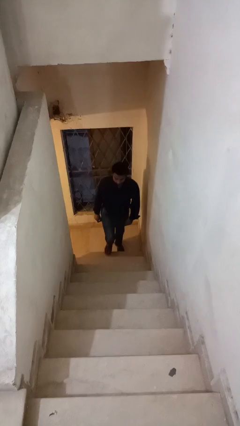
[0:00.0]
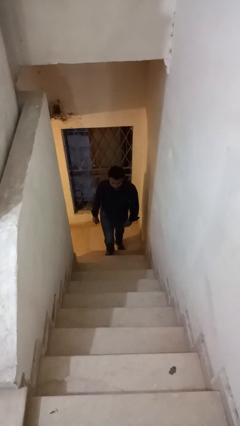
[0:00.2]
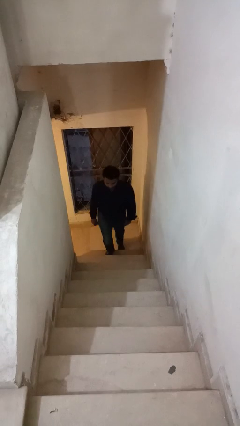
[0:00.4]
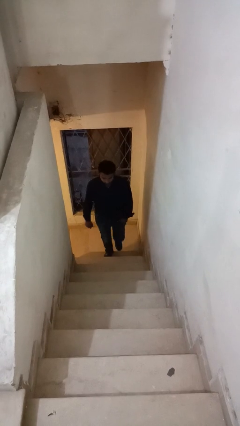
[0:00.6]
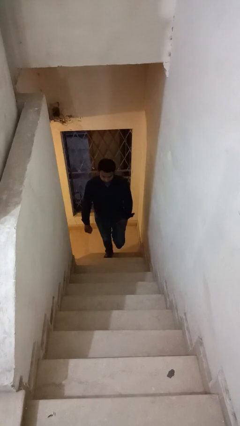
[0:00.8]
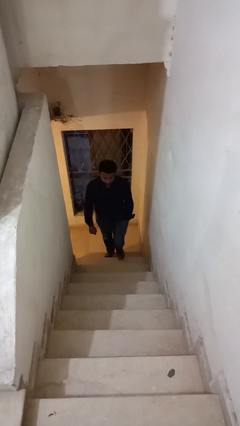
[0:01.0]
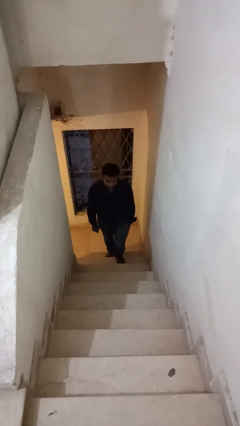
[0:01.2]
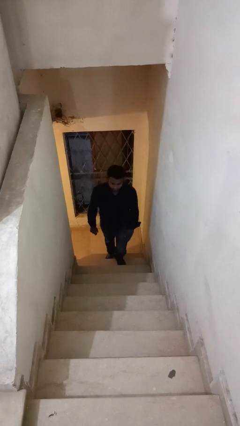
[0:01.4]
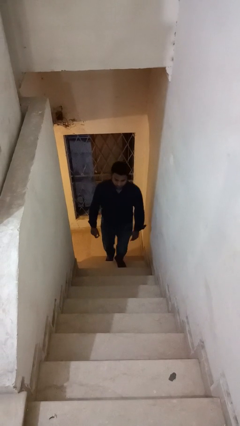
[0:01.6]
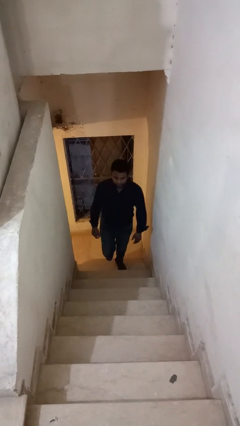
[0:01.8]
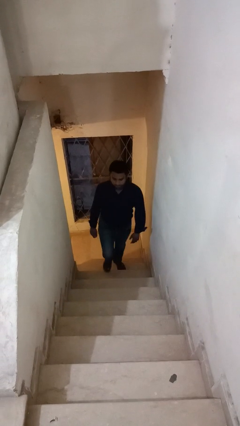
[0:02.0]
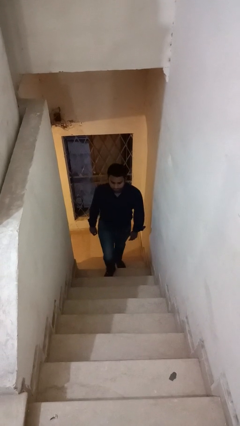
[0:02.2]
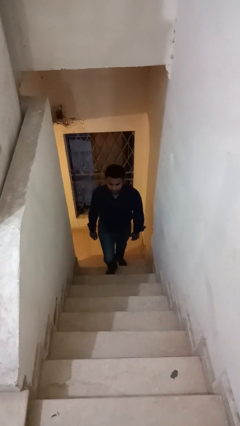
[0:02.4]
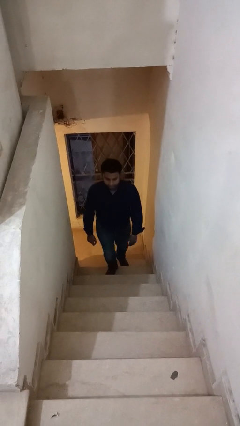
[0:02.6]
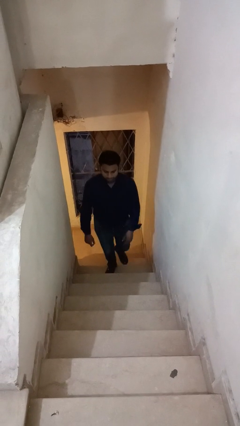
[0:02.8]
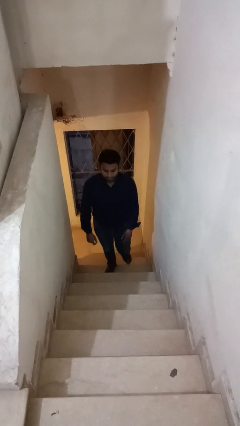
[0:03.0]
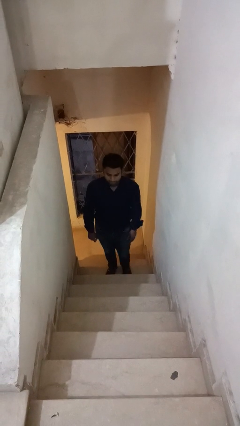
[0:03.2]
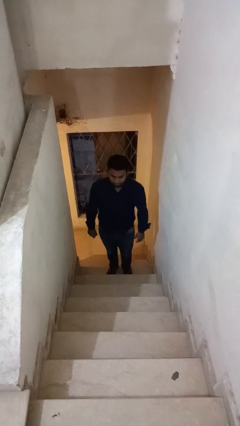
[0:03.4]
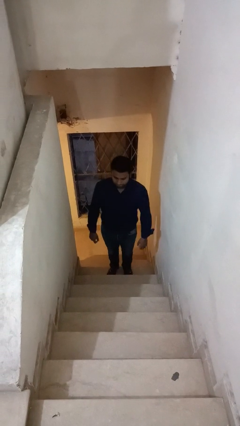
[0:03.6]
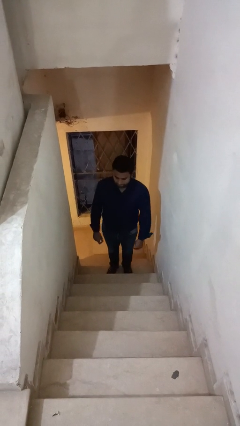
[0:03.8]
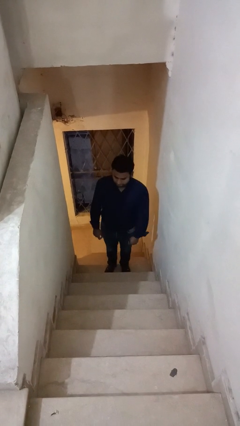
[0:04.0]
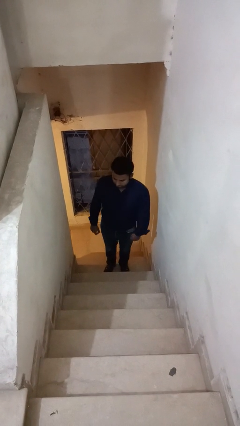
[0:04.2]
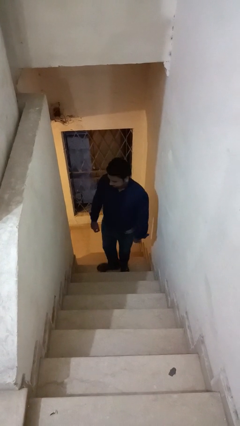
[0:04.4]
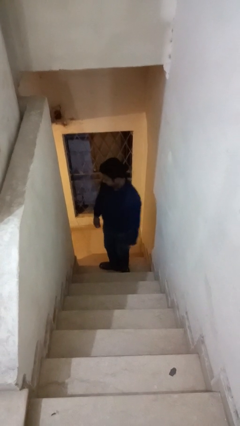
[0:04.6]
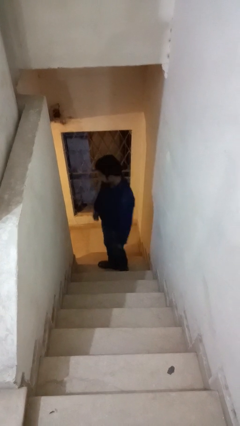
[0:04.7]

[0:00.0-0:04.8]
person climbs up stairs

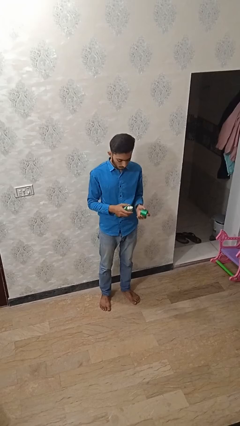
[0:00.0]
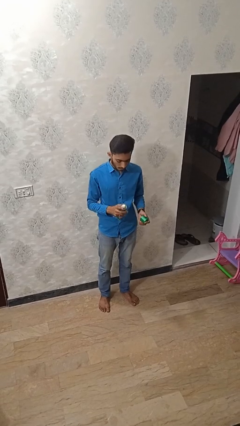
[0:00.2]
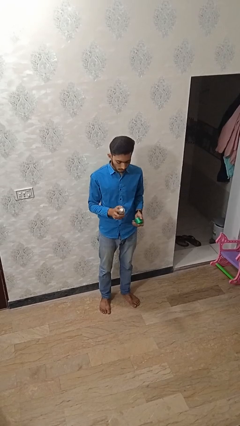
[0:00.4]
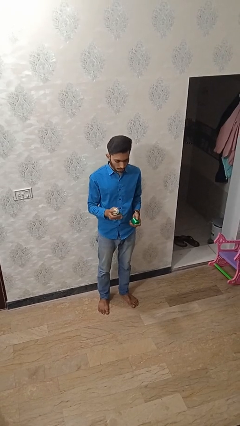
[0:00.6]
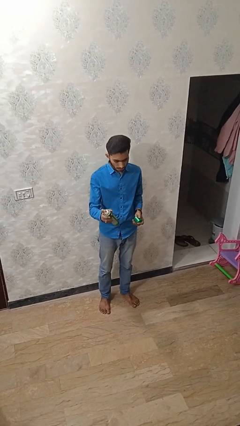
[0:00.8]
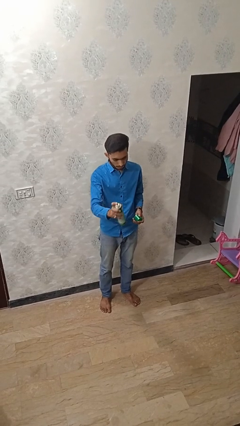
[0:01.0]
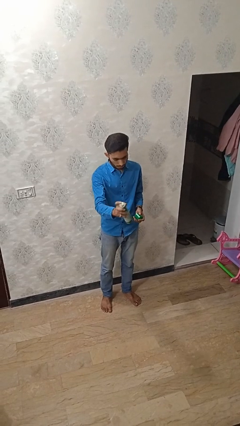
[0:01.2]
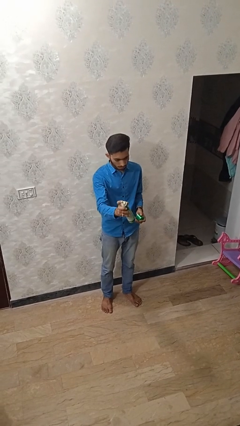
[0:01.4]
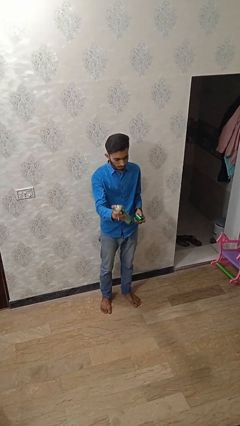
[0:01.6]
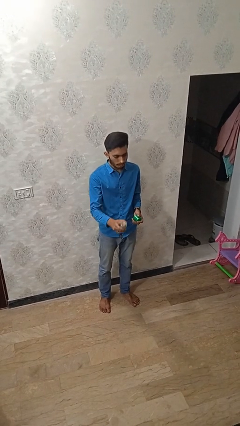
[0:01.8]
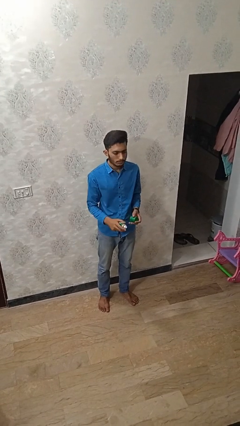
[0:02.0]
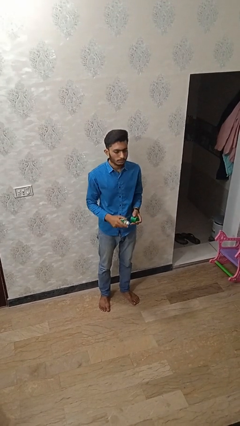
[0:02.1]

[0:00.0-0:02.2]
person sprays from bottle

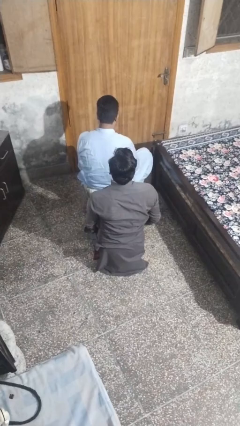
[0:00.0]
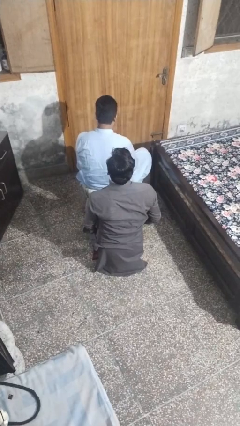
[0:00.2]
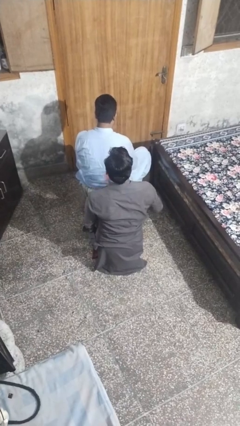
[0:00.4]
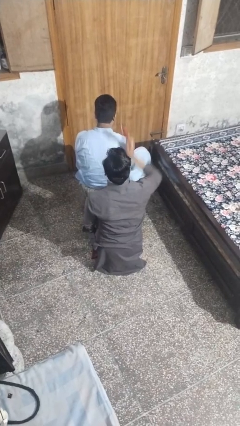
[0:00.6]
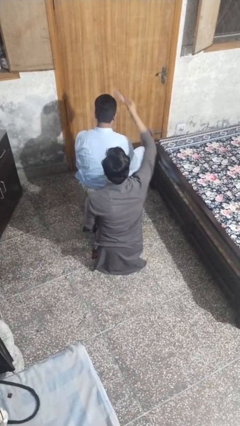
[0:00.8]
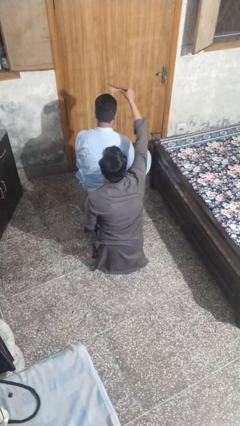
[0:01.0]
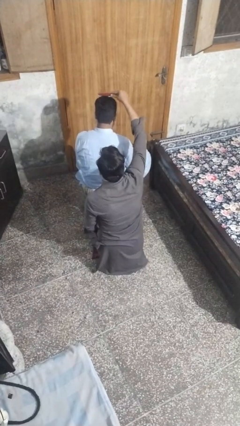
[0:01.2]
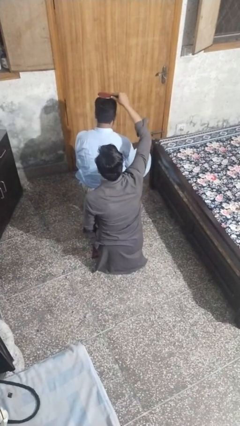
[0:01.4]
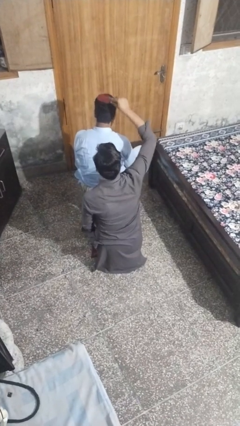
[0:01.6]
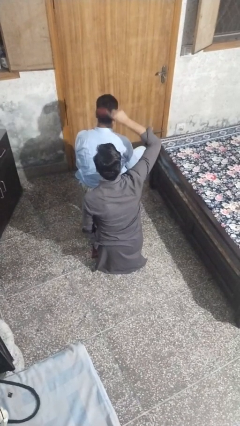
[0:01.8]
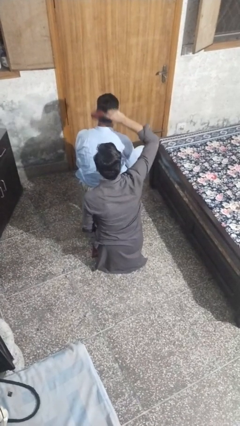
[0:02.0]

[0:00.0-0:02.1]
person brushes hair of person

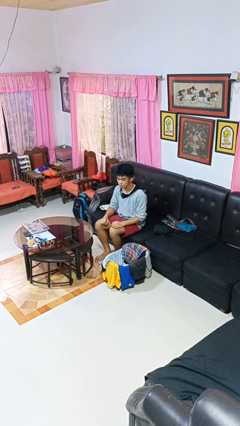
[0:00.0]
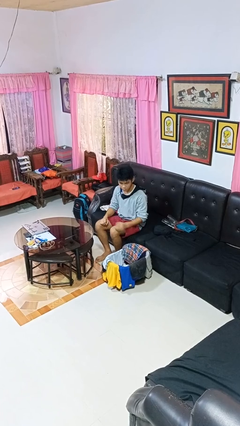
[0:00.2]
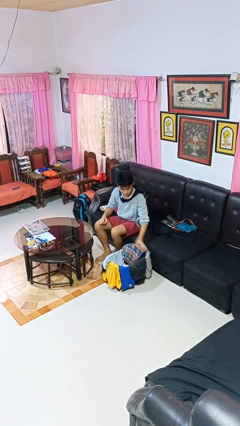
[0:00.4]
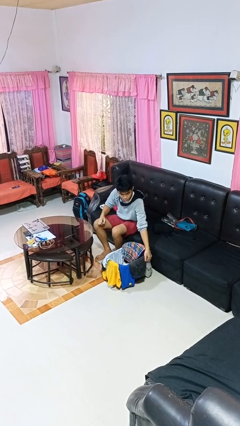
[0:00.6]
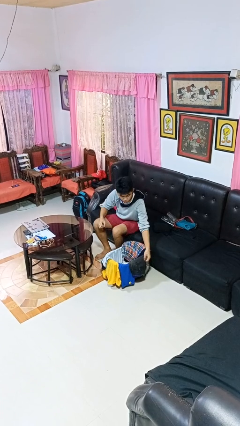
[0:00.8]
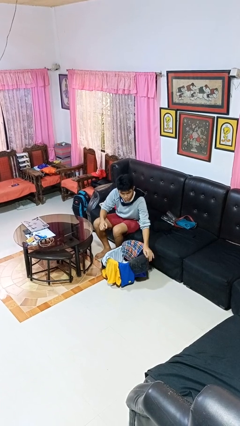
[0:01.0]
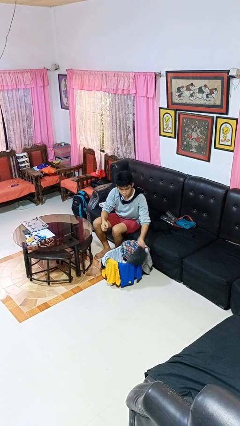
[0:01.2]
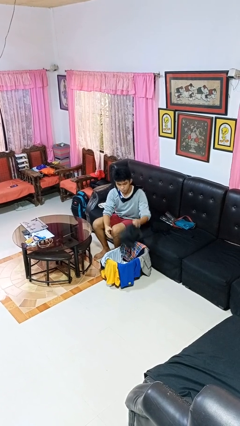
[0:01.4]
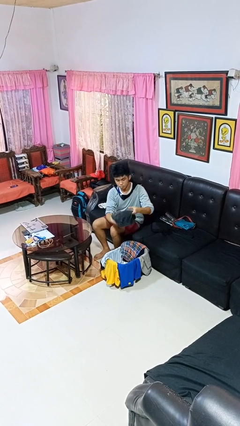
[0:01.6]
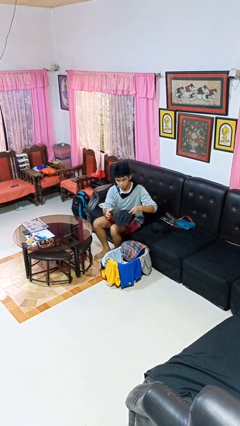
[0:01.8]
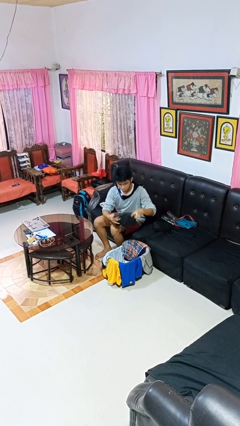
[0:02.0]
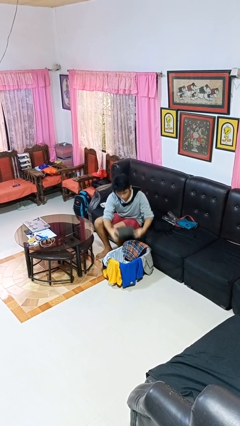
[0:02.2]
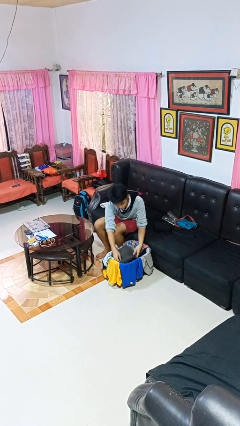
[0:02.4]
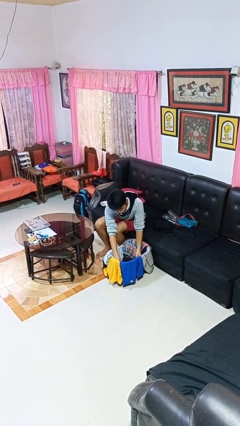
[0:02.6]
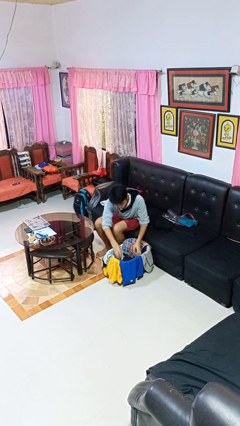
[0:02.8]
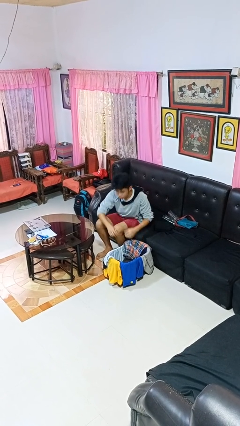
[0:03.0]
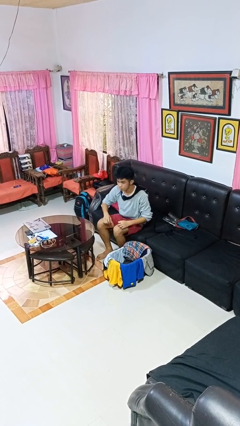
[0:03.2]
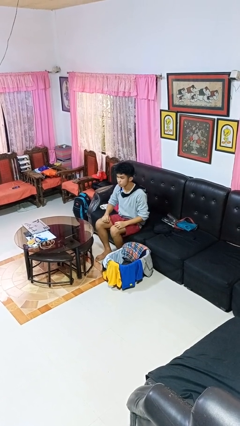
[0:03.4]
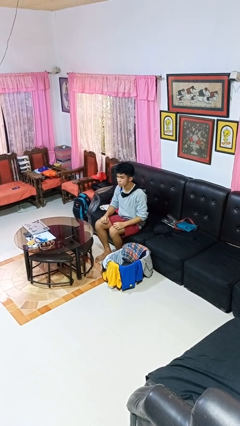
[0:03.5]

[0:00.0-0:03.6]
person folds pants

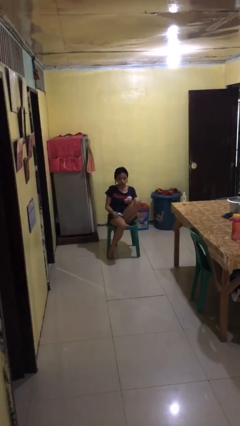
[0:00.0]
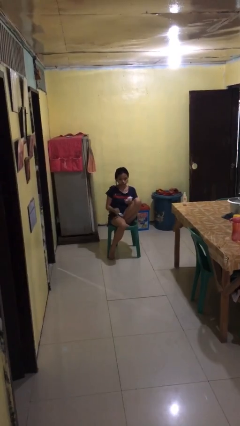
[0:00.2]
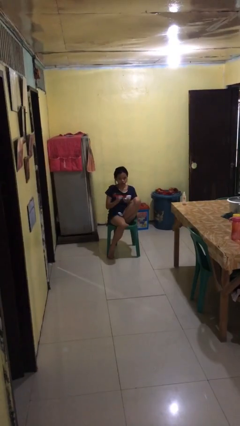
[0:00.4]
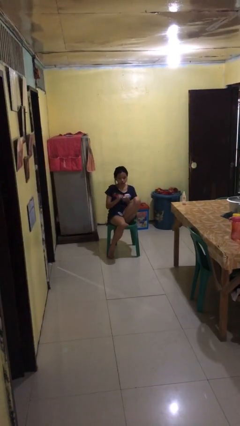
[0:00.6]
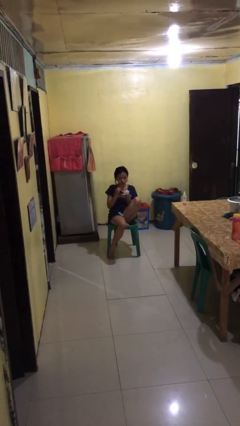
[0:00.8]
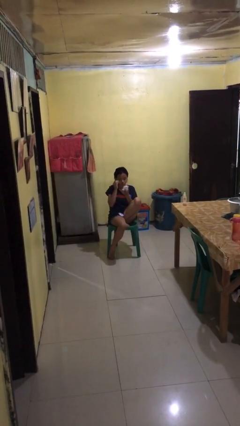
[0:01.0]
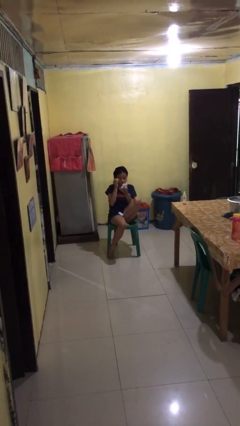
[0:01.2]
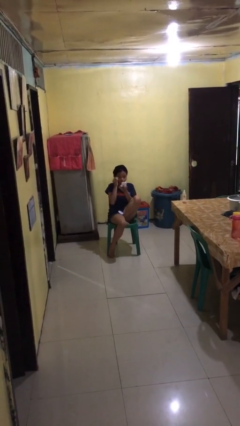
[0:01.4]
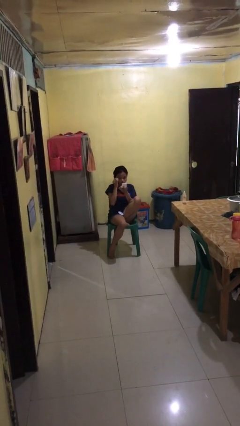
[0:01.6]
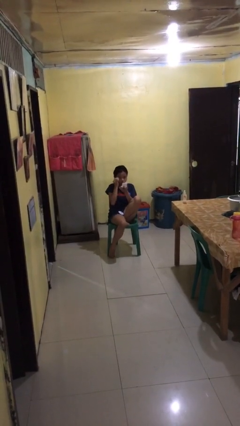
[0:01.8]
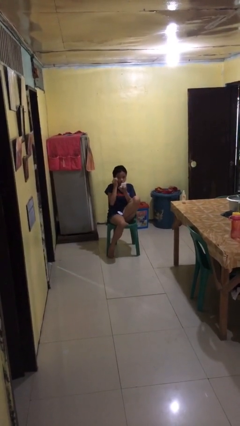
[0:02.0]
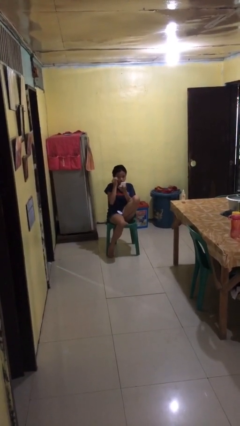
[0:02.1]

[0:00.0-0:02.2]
person applies eye makeup

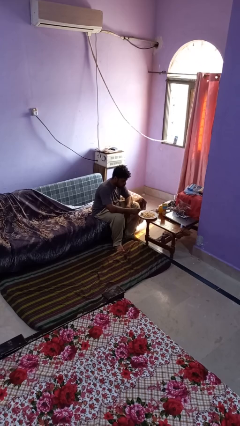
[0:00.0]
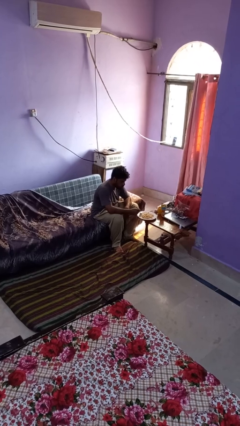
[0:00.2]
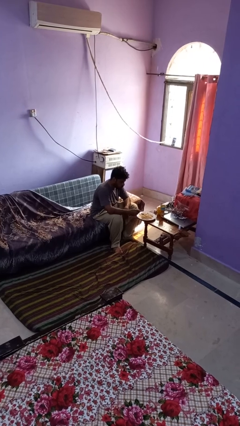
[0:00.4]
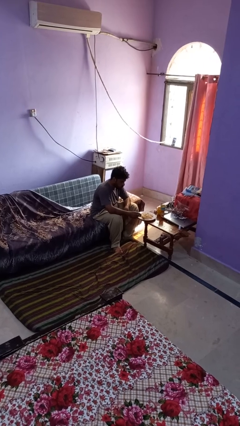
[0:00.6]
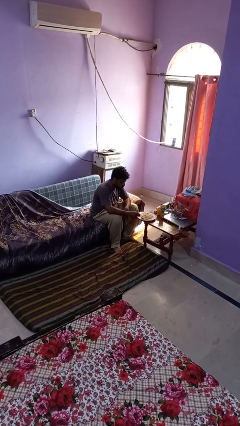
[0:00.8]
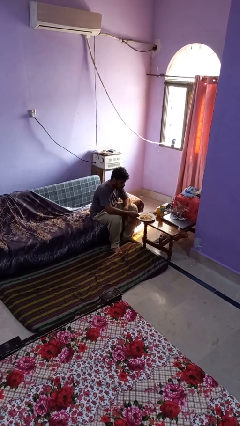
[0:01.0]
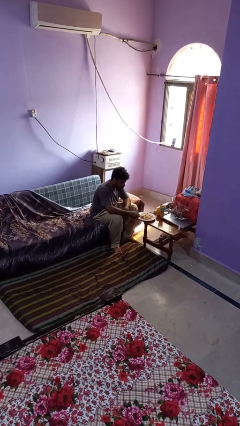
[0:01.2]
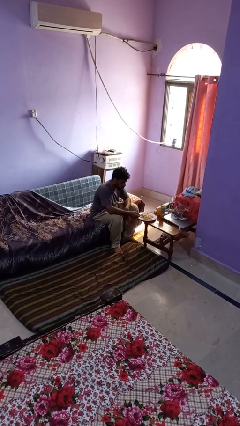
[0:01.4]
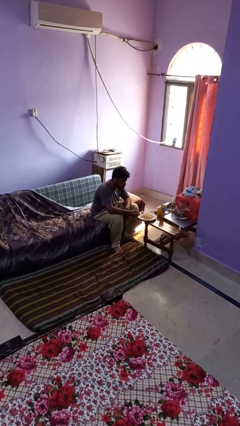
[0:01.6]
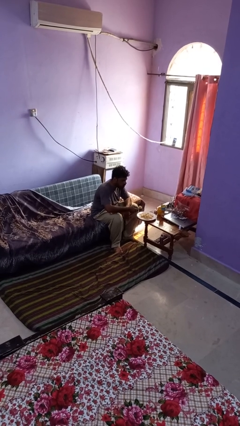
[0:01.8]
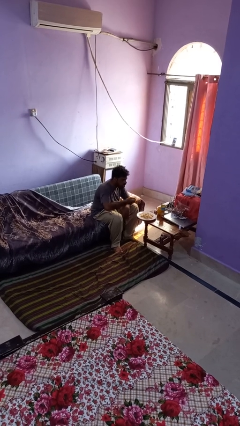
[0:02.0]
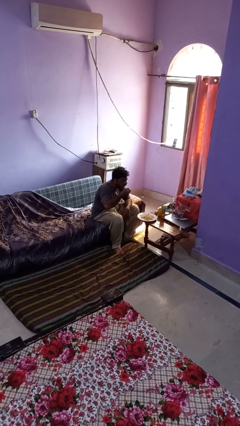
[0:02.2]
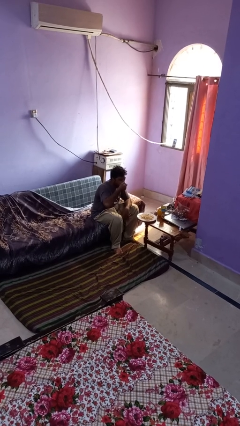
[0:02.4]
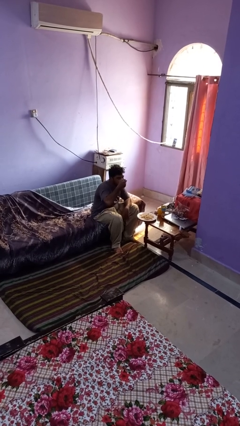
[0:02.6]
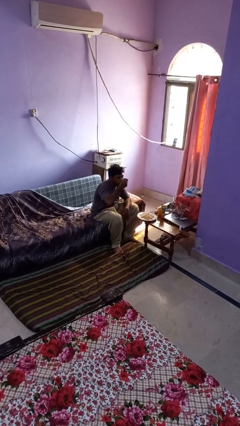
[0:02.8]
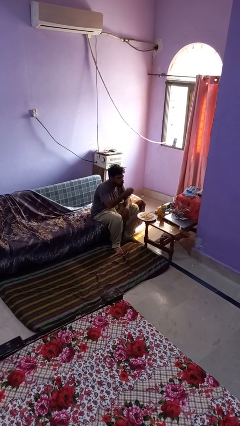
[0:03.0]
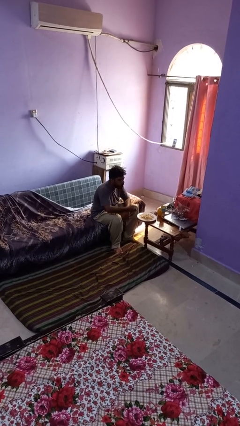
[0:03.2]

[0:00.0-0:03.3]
person eats with utensil
